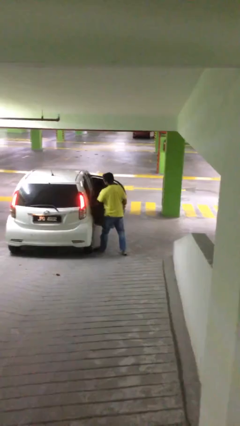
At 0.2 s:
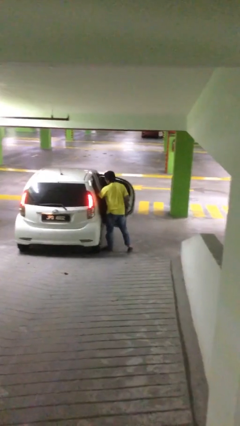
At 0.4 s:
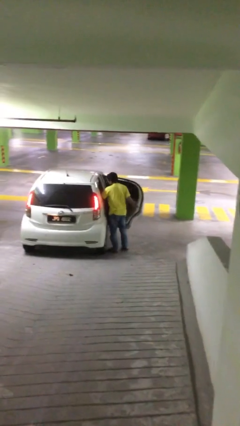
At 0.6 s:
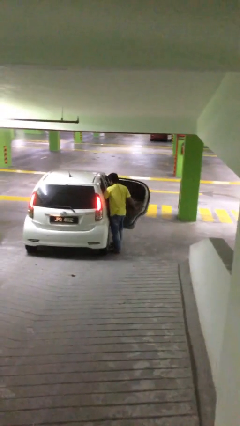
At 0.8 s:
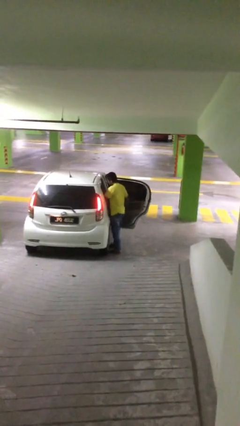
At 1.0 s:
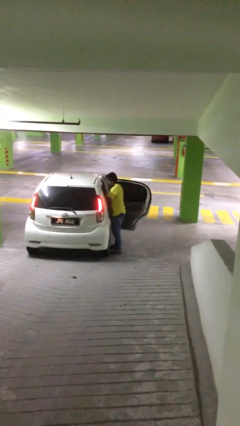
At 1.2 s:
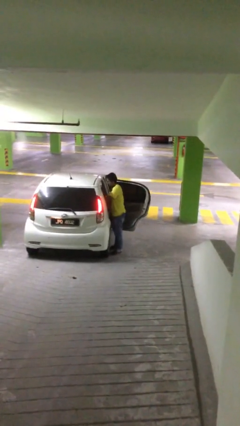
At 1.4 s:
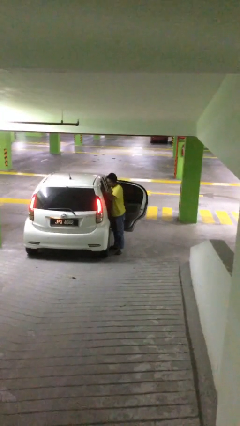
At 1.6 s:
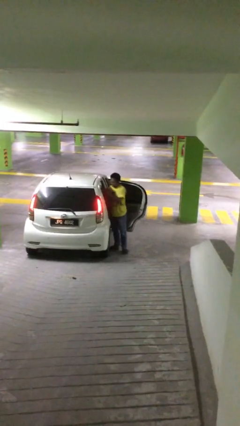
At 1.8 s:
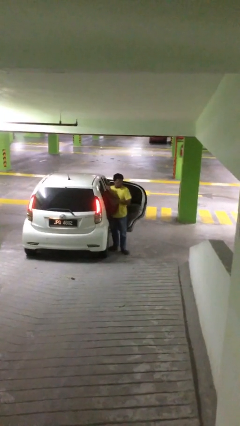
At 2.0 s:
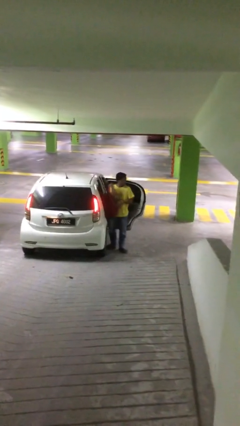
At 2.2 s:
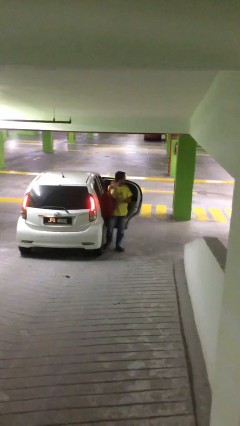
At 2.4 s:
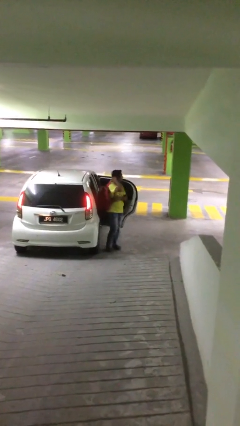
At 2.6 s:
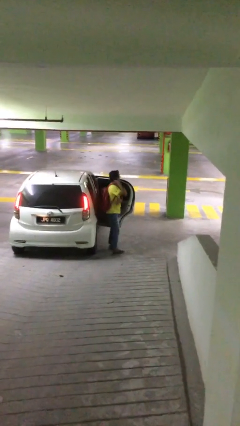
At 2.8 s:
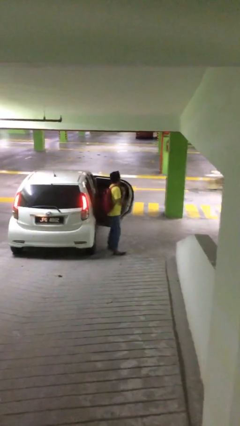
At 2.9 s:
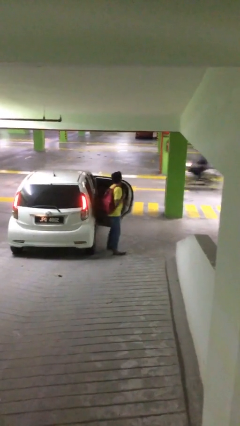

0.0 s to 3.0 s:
person unloads car

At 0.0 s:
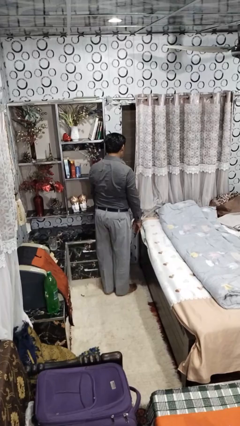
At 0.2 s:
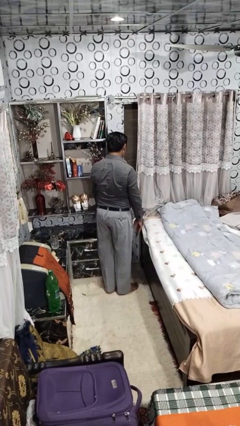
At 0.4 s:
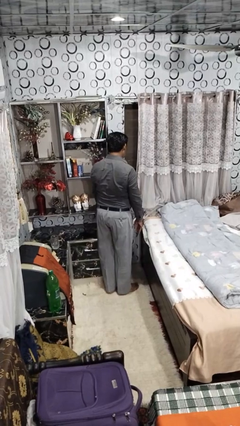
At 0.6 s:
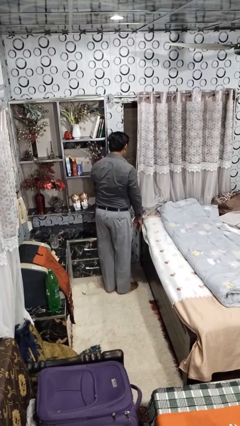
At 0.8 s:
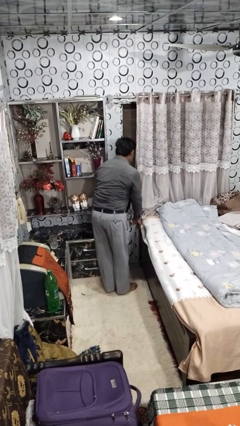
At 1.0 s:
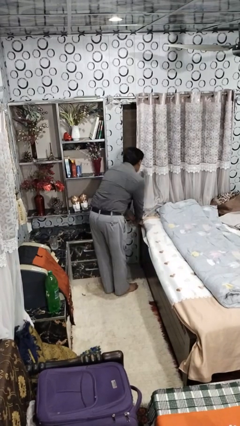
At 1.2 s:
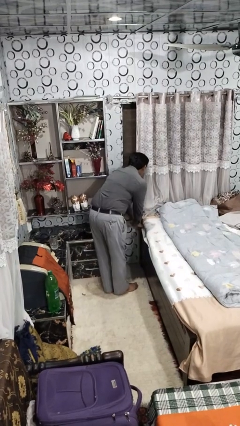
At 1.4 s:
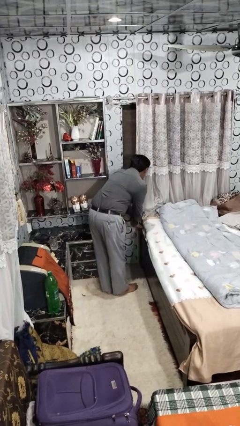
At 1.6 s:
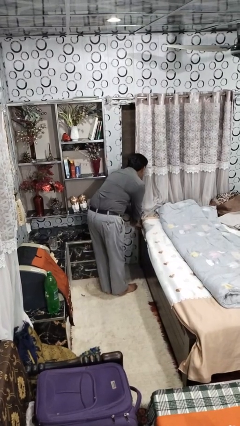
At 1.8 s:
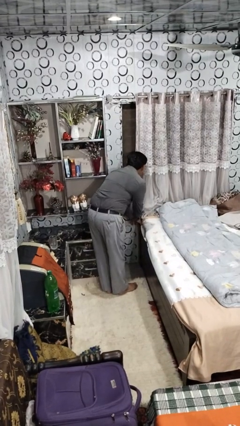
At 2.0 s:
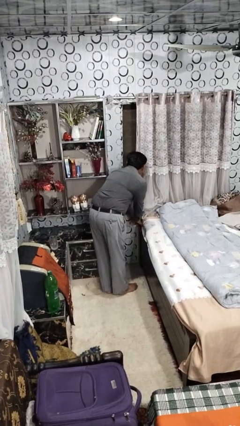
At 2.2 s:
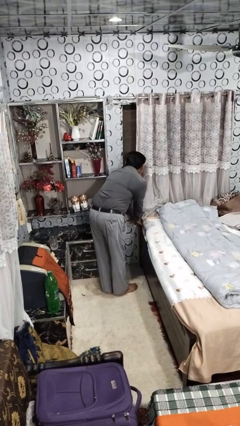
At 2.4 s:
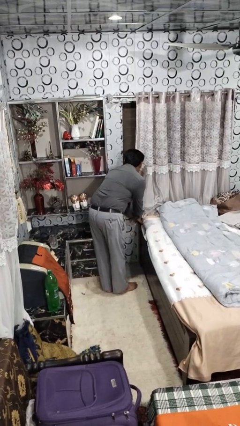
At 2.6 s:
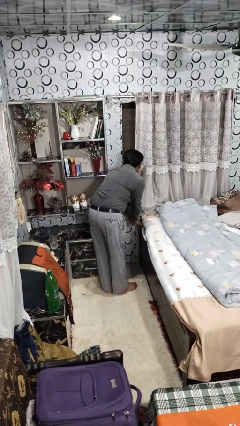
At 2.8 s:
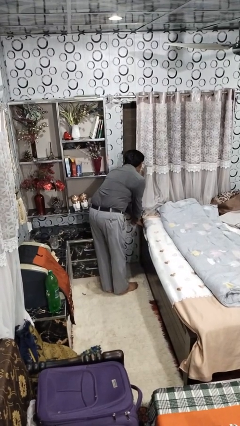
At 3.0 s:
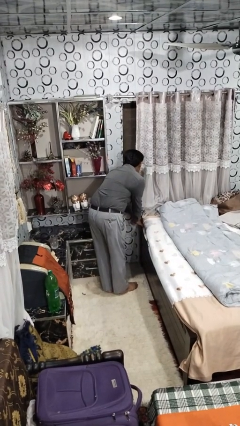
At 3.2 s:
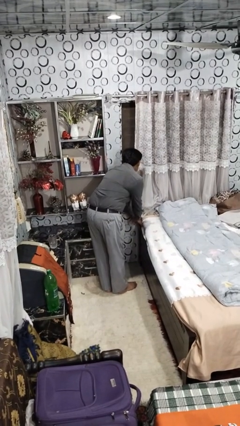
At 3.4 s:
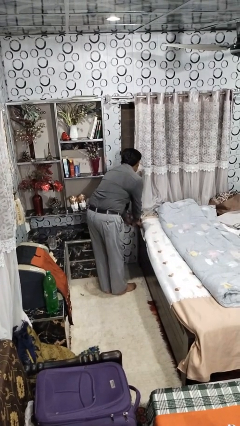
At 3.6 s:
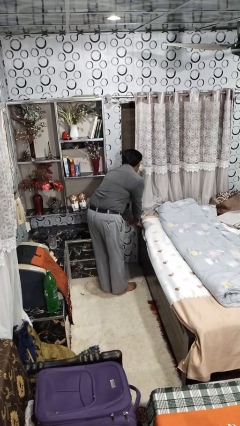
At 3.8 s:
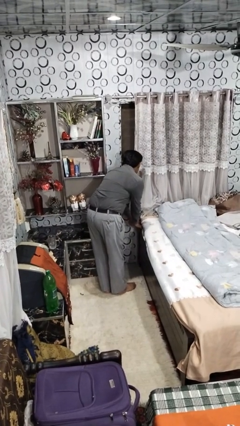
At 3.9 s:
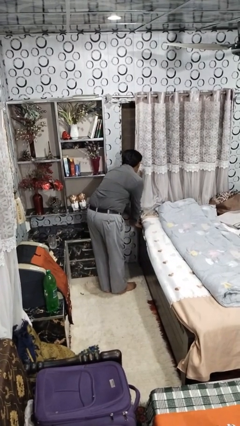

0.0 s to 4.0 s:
person makes bed

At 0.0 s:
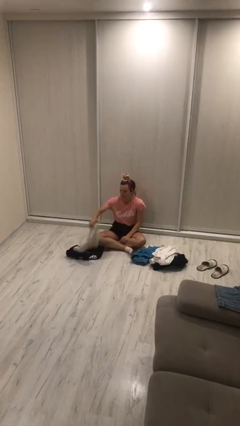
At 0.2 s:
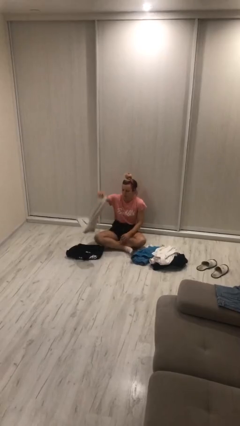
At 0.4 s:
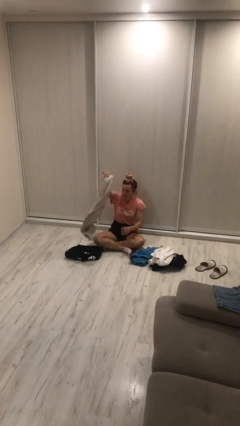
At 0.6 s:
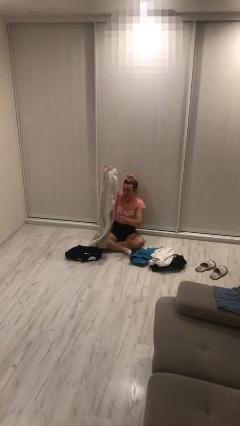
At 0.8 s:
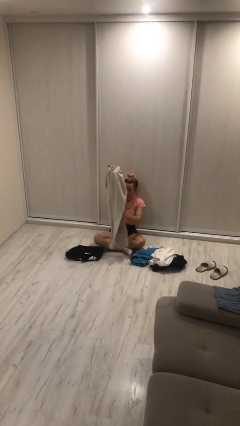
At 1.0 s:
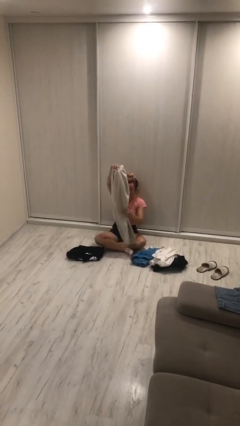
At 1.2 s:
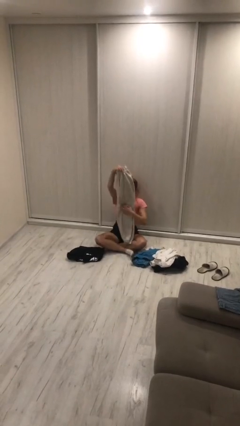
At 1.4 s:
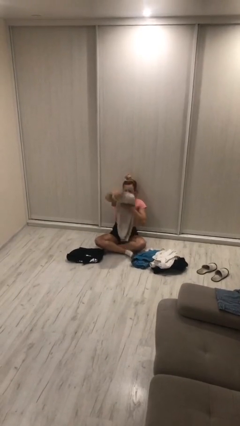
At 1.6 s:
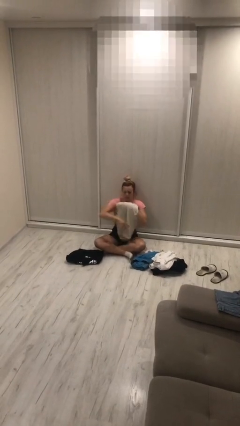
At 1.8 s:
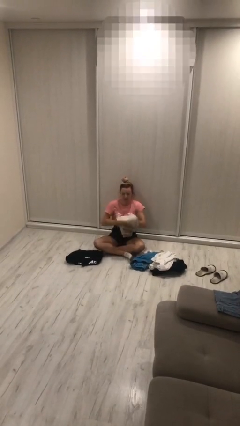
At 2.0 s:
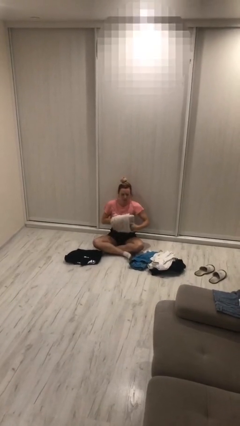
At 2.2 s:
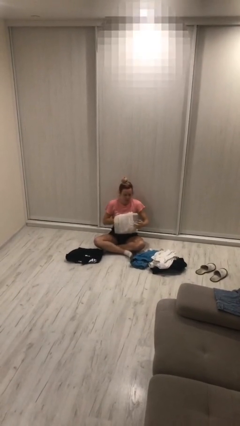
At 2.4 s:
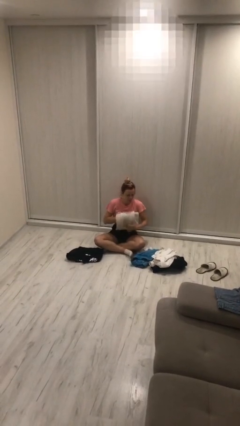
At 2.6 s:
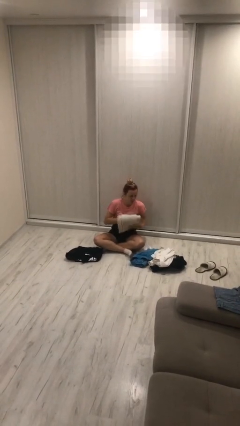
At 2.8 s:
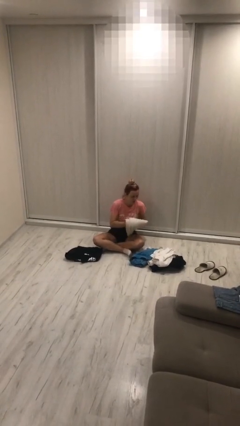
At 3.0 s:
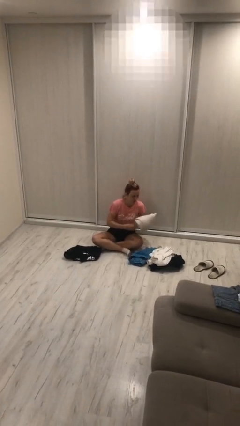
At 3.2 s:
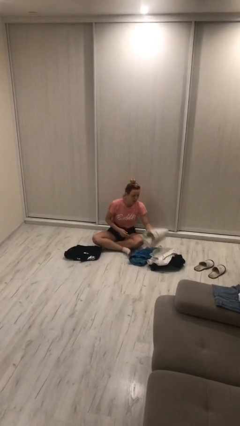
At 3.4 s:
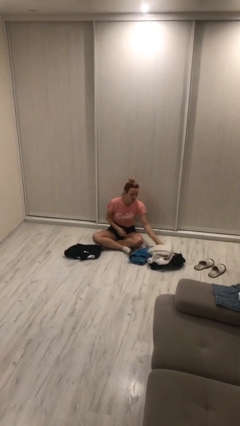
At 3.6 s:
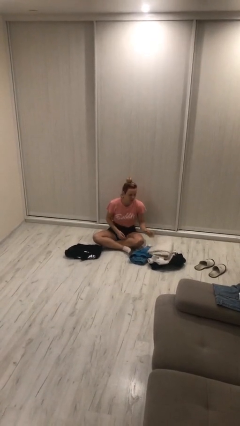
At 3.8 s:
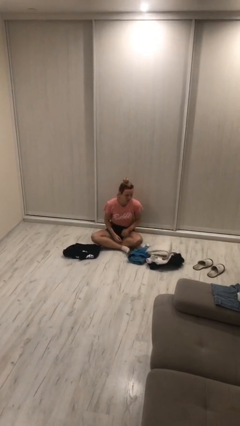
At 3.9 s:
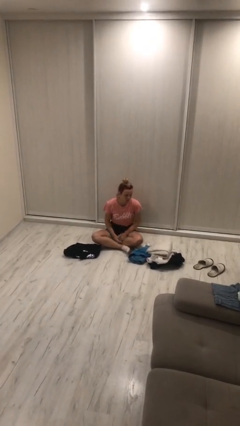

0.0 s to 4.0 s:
person folds pants

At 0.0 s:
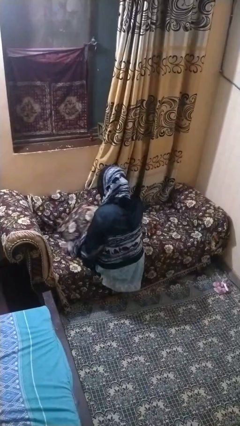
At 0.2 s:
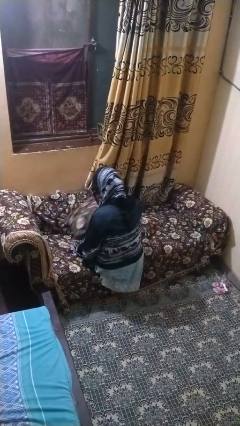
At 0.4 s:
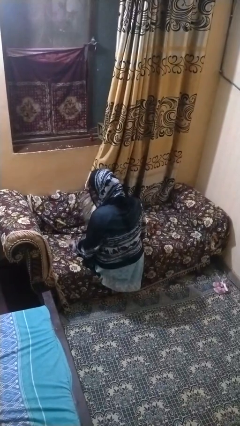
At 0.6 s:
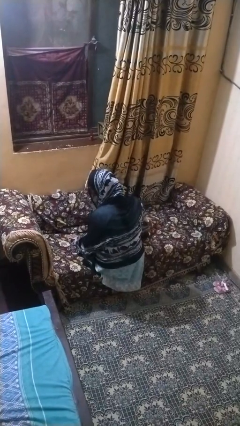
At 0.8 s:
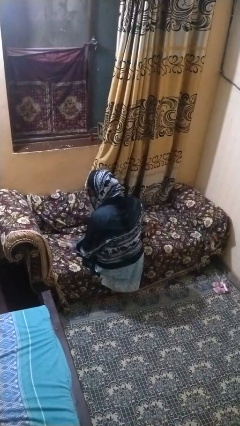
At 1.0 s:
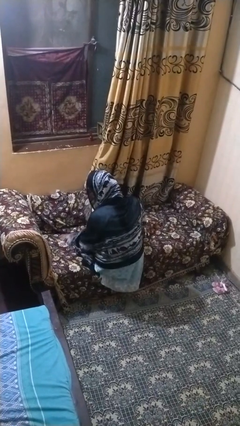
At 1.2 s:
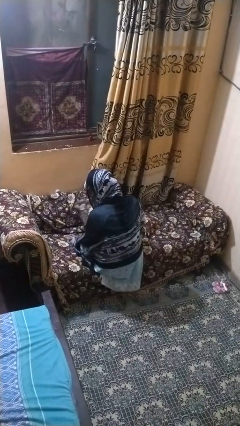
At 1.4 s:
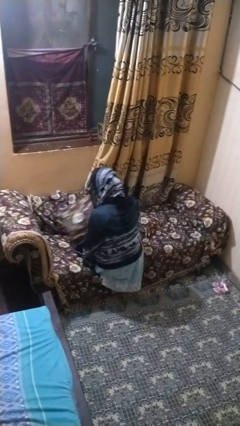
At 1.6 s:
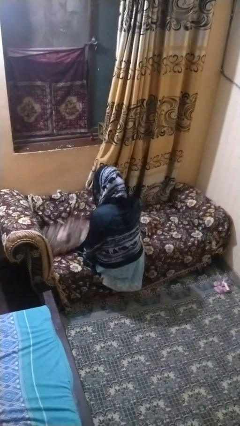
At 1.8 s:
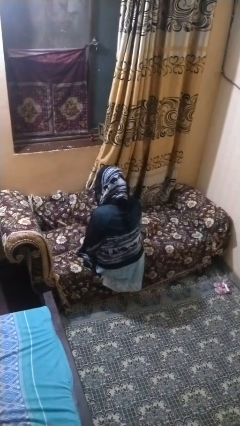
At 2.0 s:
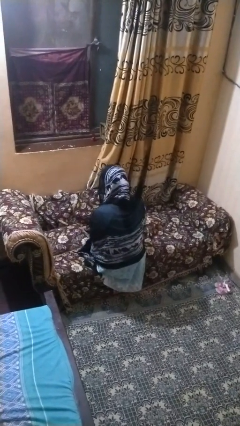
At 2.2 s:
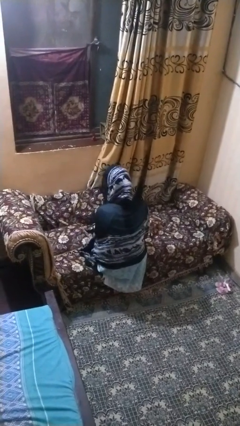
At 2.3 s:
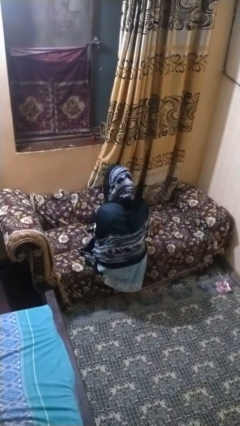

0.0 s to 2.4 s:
person searches in couch

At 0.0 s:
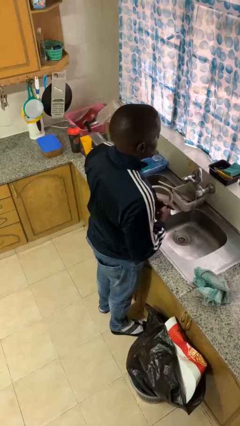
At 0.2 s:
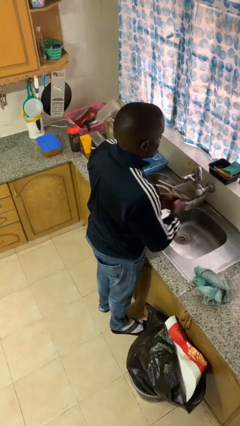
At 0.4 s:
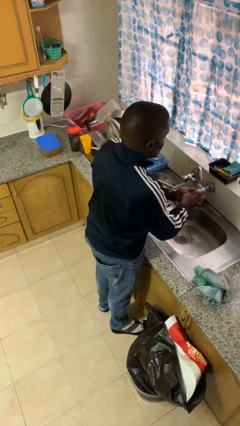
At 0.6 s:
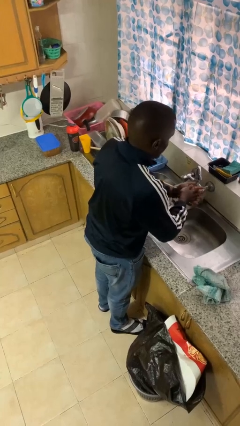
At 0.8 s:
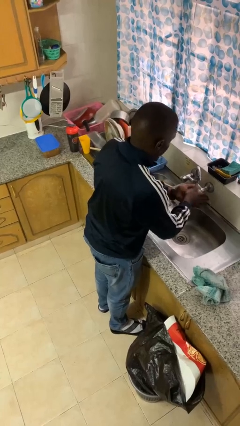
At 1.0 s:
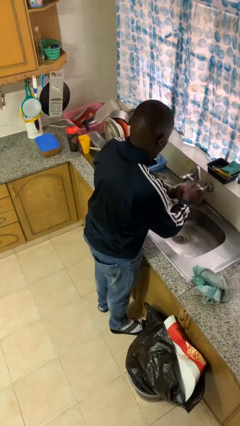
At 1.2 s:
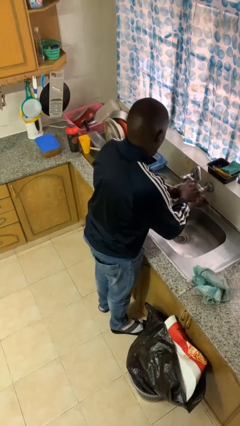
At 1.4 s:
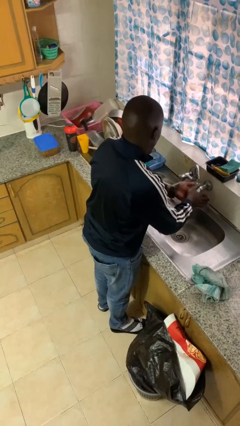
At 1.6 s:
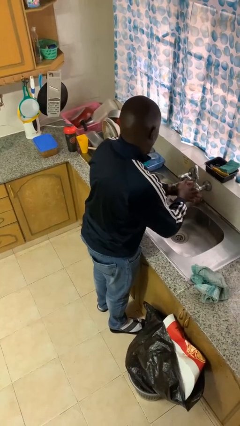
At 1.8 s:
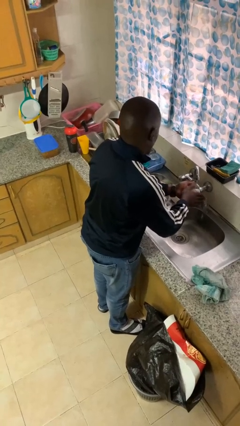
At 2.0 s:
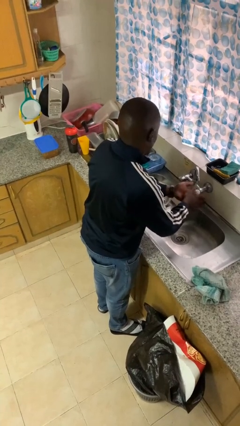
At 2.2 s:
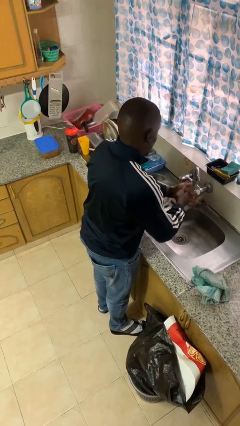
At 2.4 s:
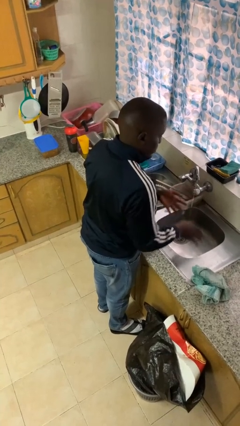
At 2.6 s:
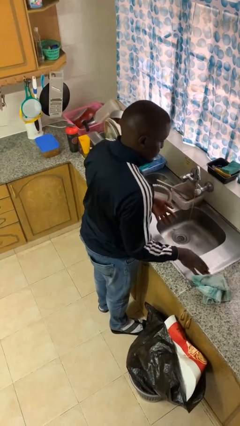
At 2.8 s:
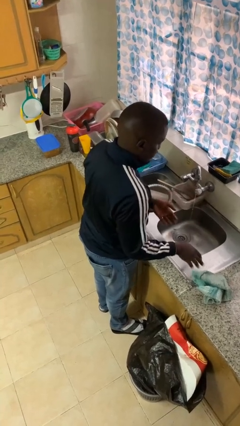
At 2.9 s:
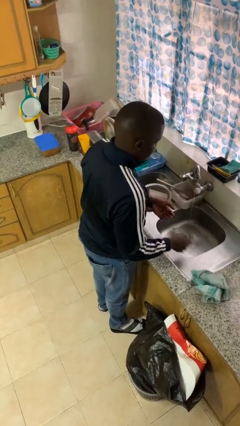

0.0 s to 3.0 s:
person washes hands

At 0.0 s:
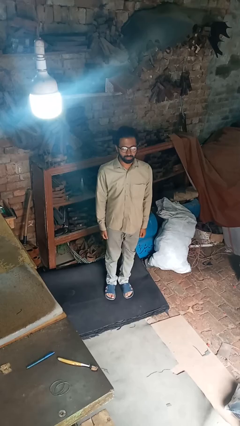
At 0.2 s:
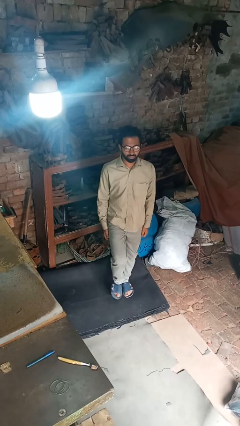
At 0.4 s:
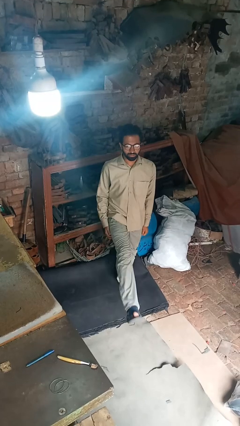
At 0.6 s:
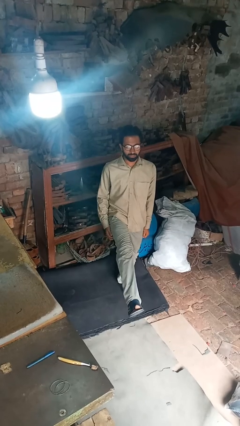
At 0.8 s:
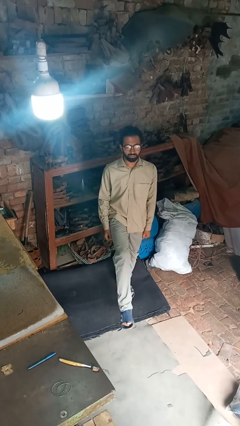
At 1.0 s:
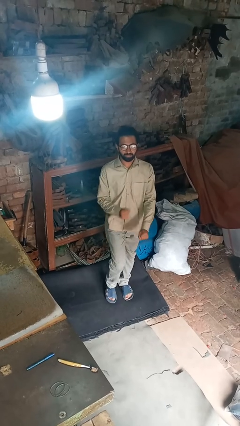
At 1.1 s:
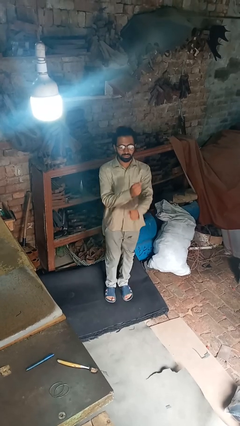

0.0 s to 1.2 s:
person karate kicks
